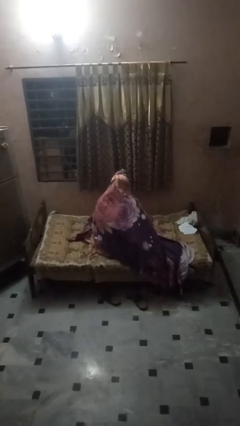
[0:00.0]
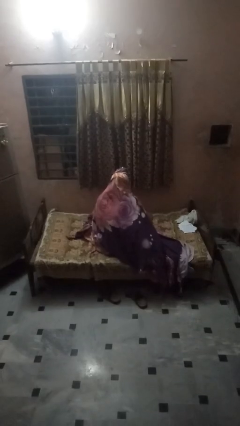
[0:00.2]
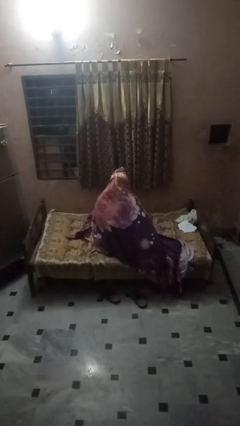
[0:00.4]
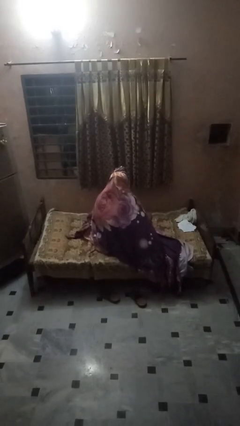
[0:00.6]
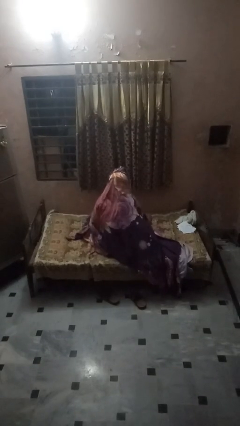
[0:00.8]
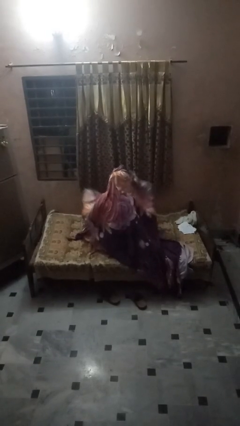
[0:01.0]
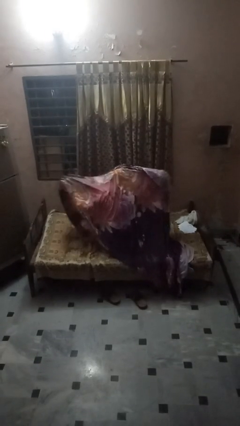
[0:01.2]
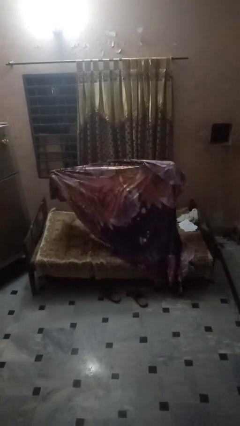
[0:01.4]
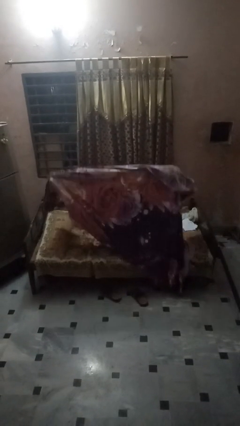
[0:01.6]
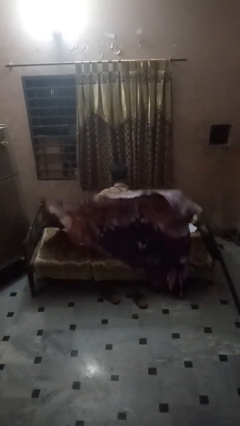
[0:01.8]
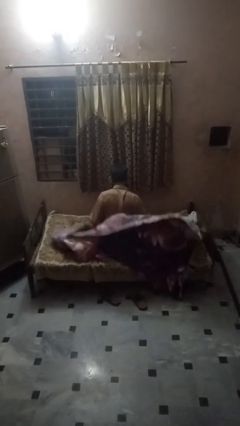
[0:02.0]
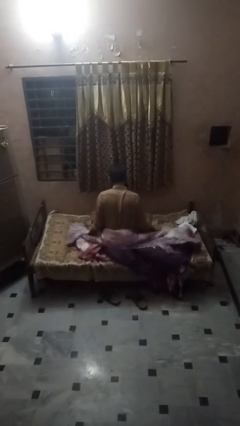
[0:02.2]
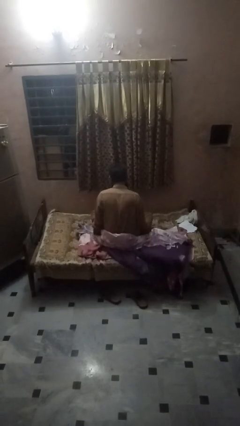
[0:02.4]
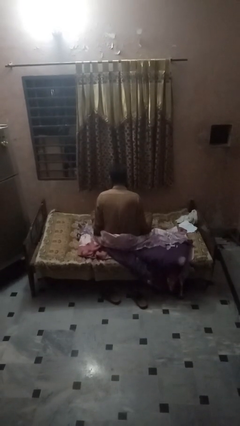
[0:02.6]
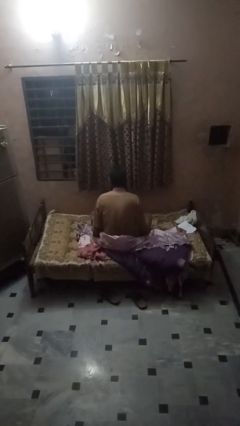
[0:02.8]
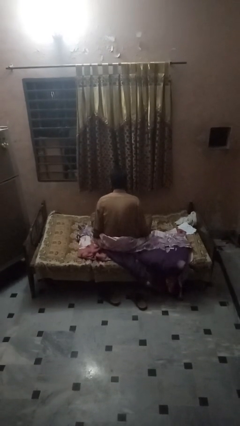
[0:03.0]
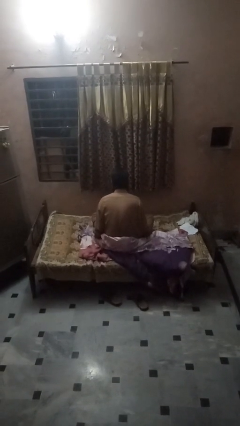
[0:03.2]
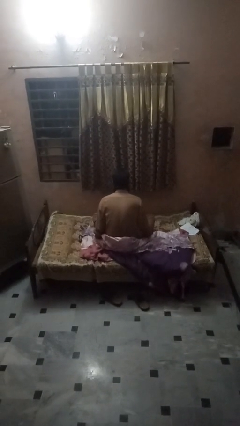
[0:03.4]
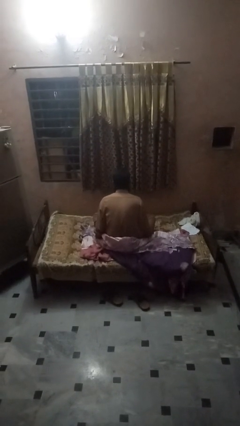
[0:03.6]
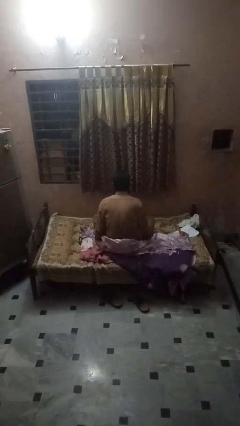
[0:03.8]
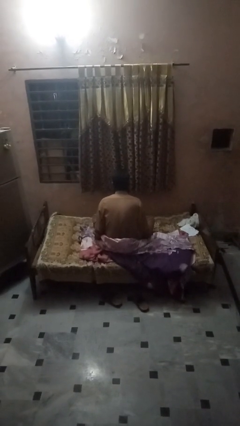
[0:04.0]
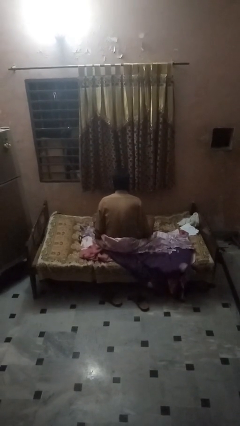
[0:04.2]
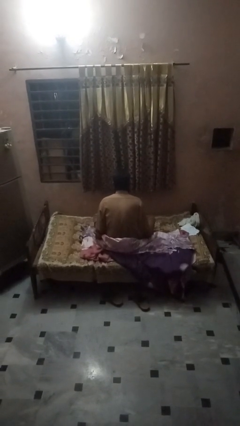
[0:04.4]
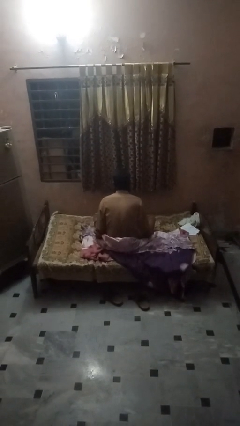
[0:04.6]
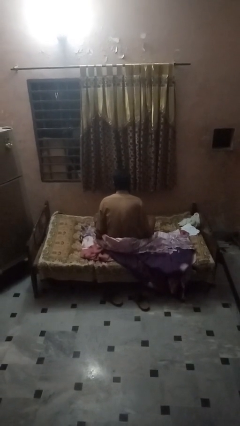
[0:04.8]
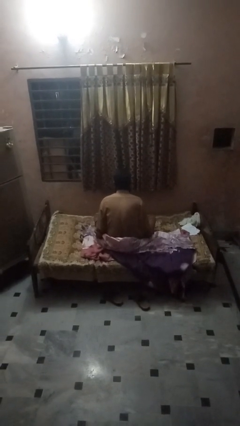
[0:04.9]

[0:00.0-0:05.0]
person uncovers with bedsheets

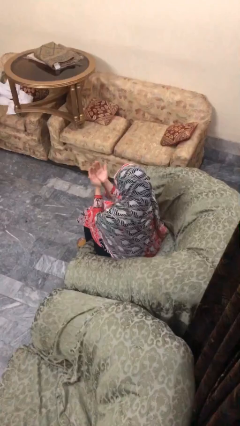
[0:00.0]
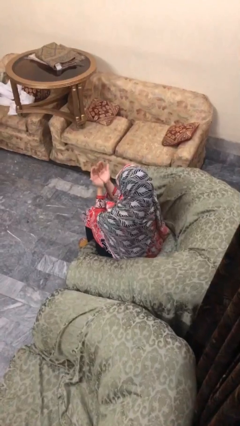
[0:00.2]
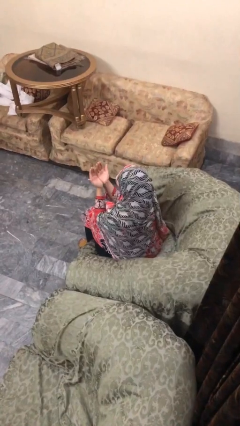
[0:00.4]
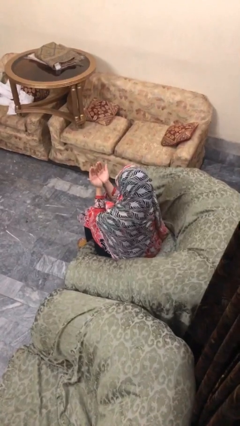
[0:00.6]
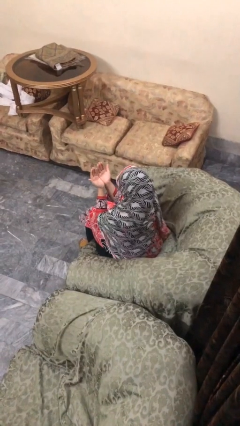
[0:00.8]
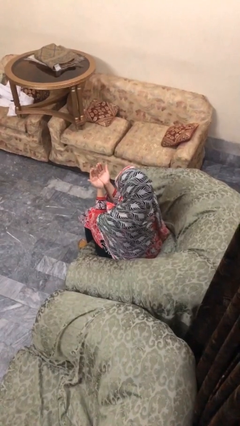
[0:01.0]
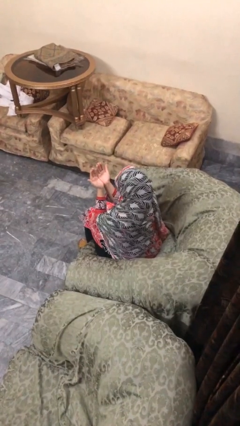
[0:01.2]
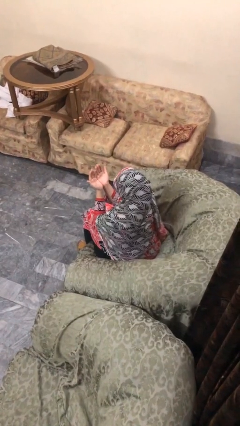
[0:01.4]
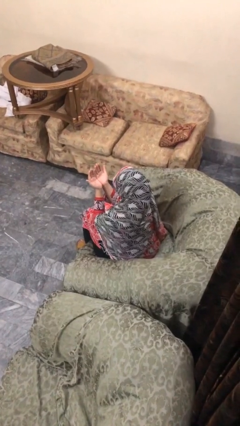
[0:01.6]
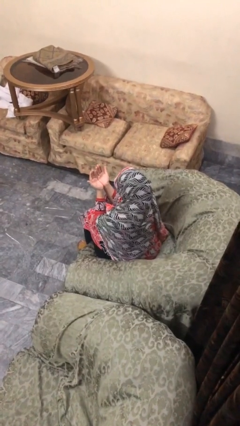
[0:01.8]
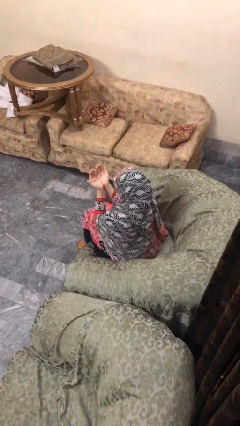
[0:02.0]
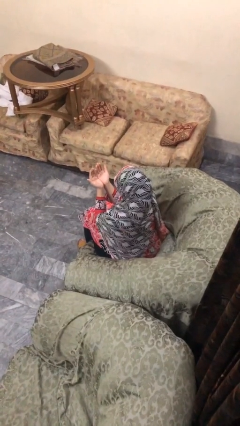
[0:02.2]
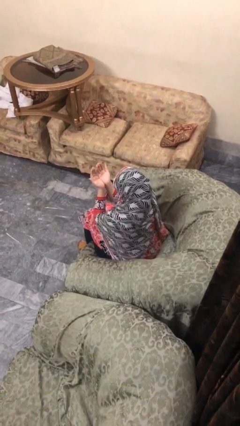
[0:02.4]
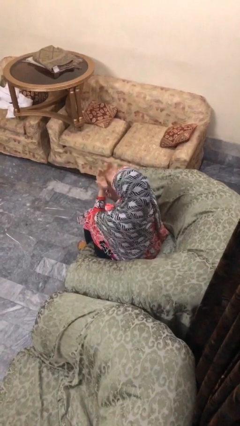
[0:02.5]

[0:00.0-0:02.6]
person prays

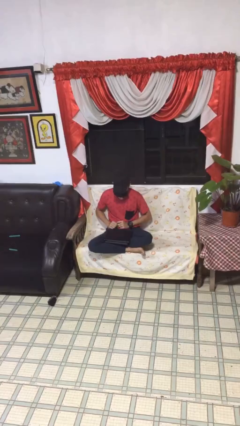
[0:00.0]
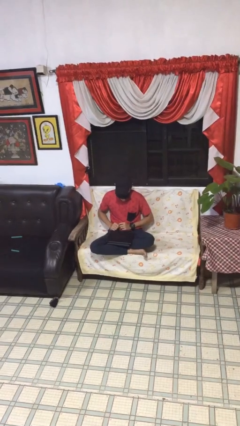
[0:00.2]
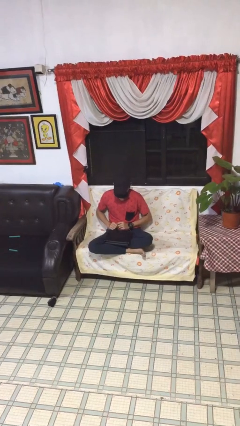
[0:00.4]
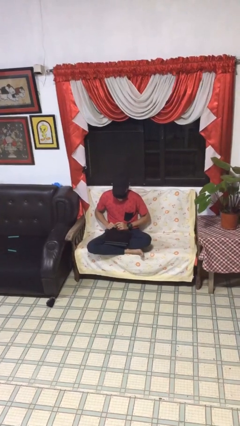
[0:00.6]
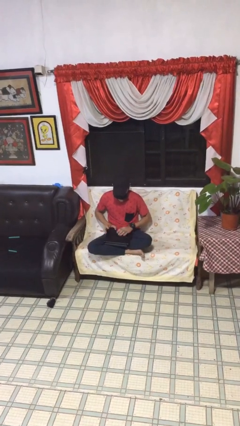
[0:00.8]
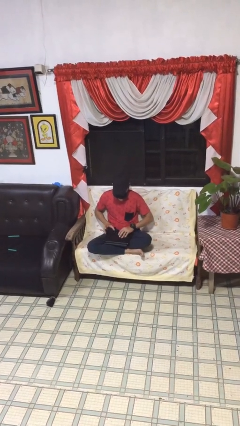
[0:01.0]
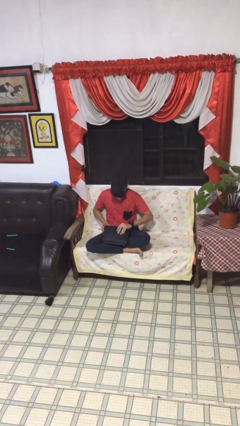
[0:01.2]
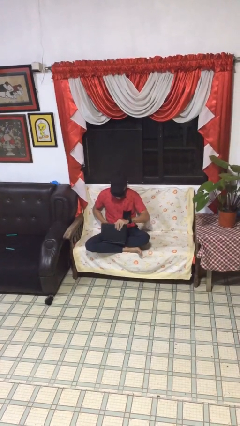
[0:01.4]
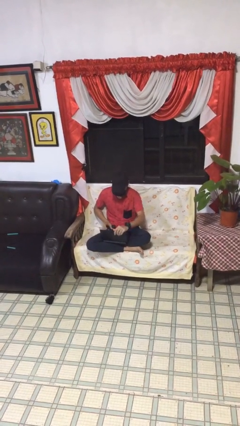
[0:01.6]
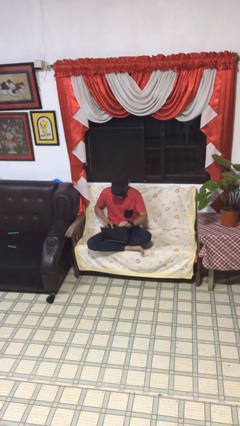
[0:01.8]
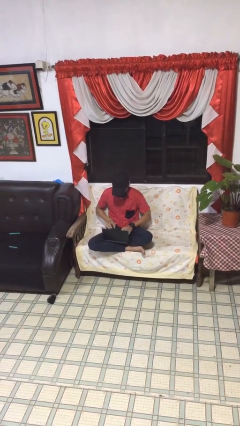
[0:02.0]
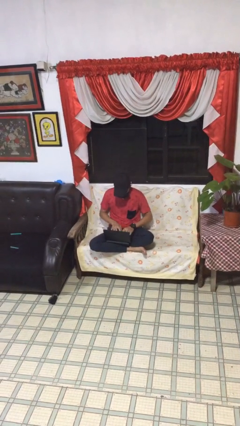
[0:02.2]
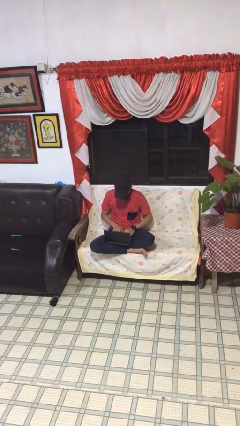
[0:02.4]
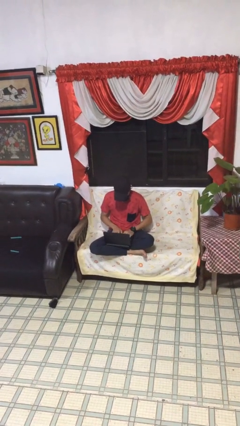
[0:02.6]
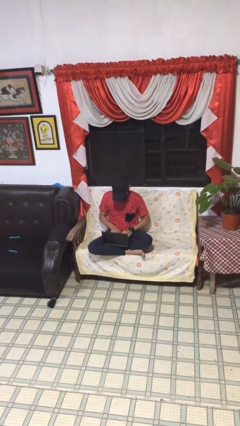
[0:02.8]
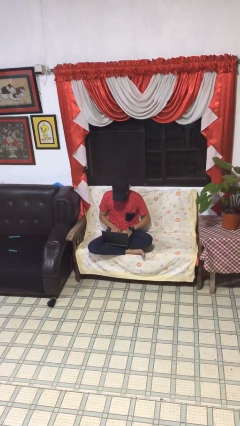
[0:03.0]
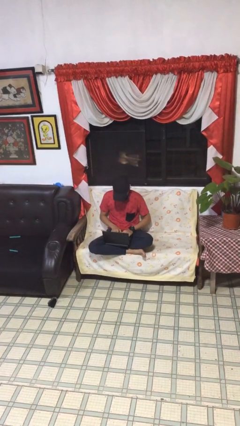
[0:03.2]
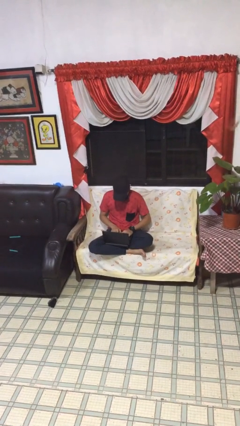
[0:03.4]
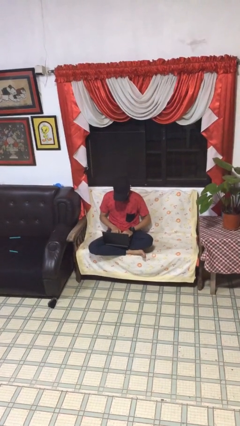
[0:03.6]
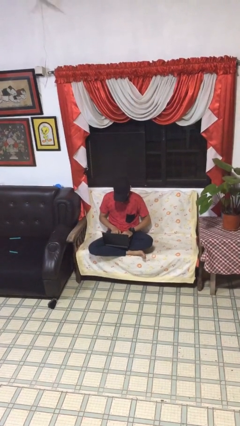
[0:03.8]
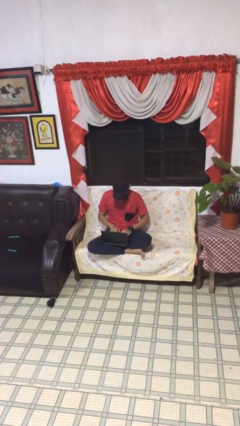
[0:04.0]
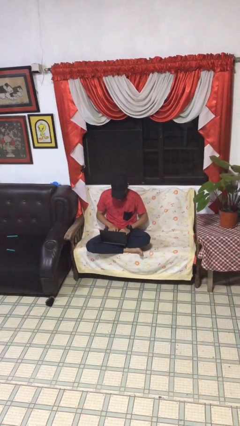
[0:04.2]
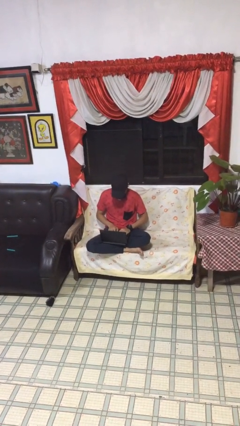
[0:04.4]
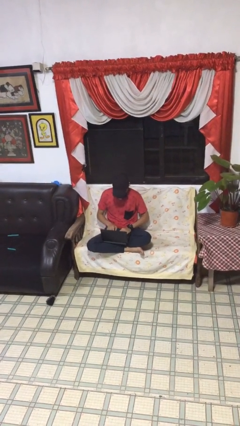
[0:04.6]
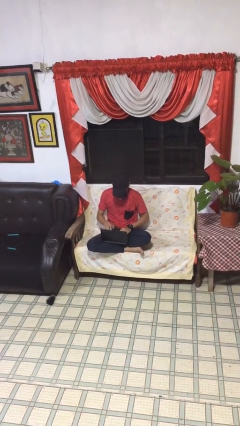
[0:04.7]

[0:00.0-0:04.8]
person interacts with laptop

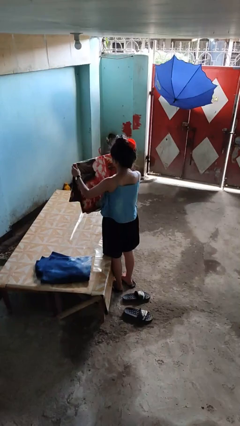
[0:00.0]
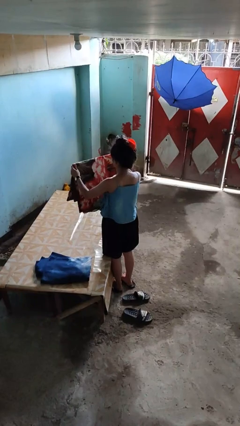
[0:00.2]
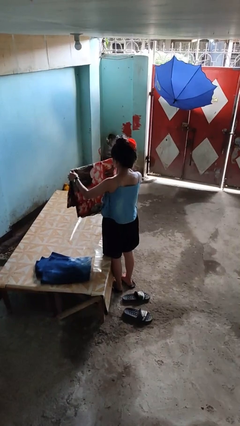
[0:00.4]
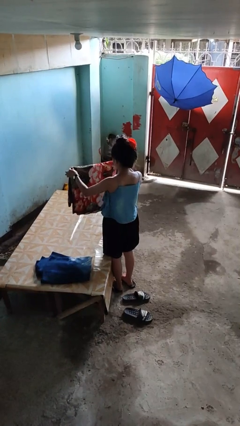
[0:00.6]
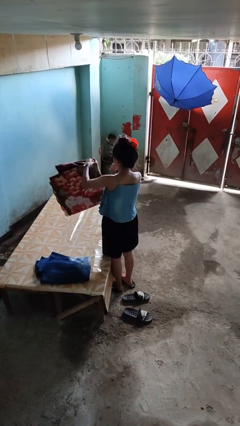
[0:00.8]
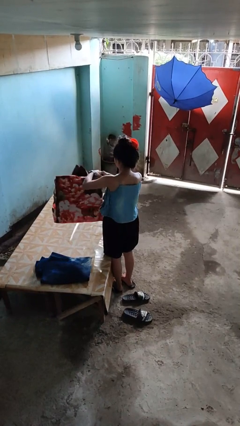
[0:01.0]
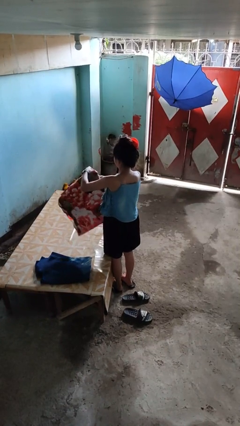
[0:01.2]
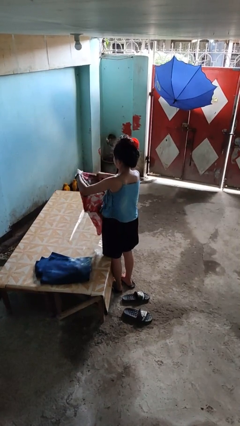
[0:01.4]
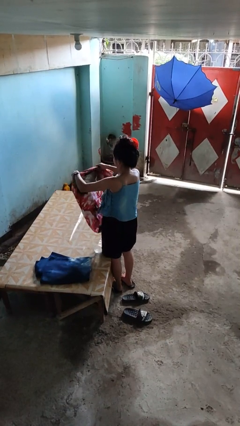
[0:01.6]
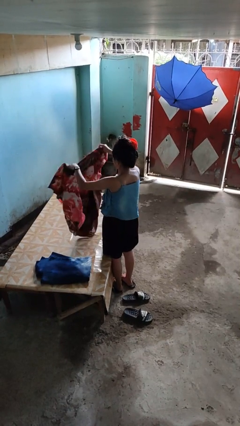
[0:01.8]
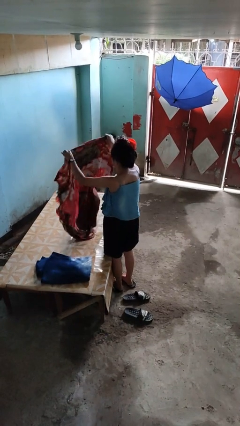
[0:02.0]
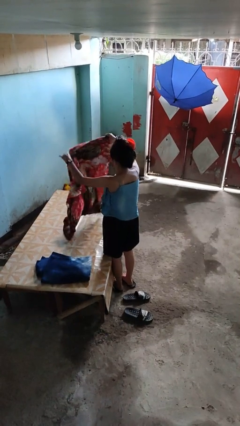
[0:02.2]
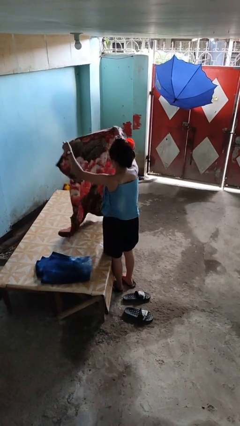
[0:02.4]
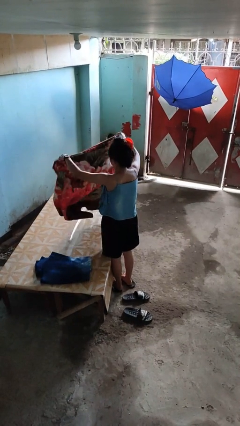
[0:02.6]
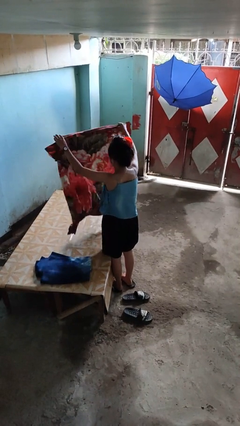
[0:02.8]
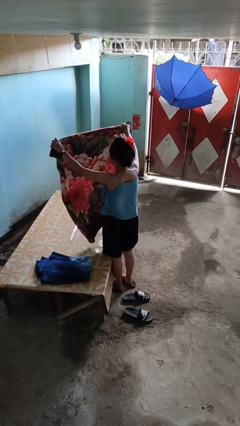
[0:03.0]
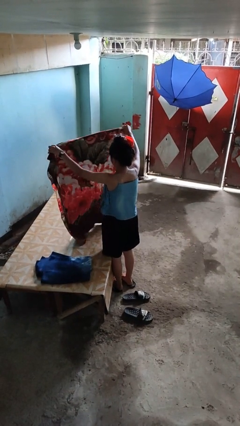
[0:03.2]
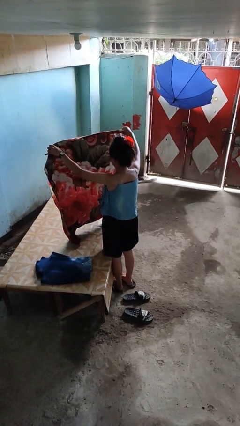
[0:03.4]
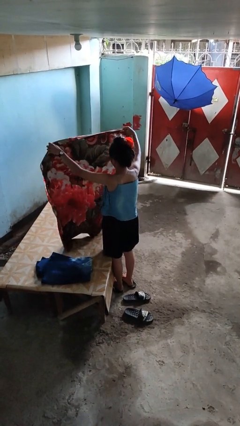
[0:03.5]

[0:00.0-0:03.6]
person unfolds blanket

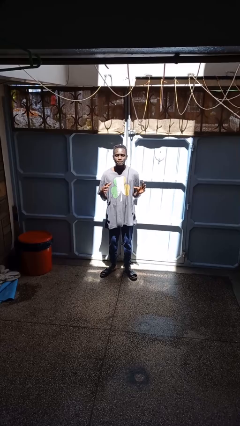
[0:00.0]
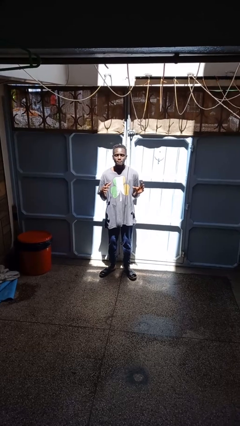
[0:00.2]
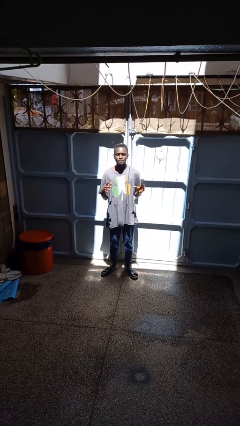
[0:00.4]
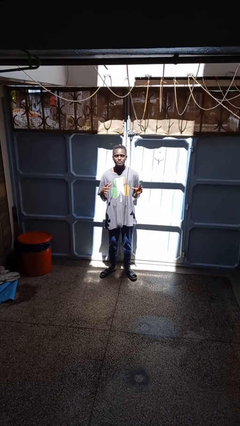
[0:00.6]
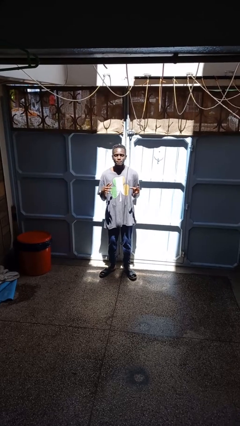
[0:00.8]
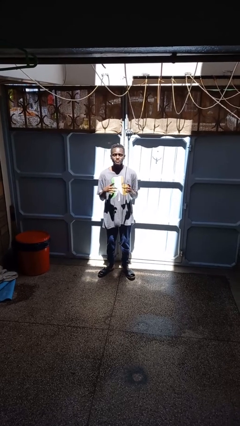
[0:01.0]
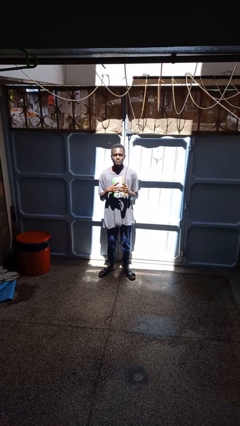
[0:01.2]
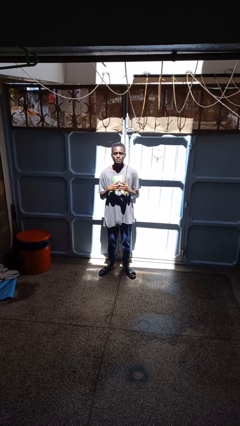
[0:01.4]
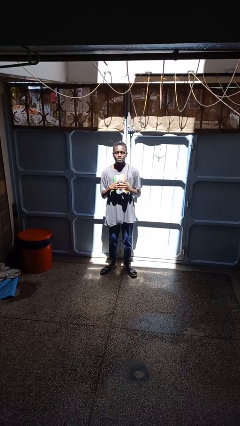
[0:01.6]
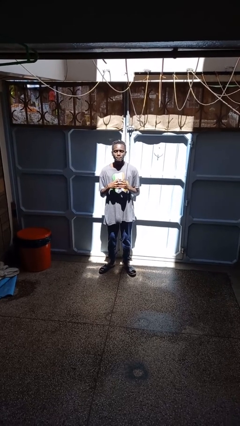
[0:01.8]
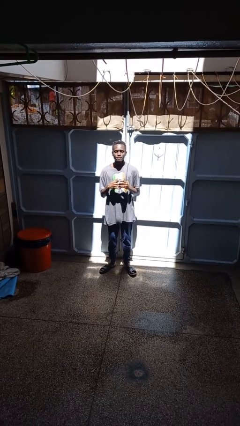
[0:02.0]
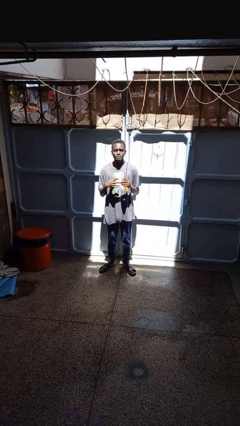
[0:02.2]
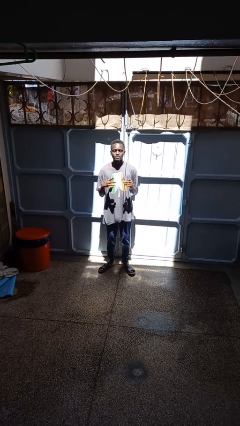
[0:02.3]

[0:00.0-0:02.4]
person takes off ring
